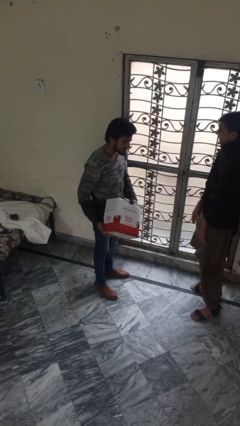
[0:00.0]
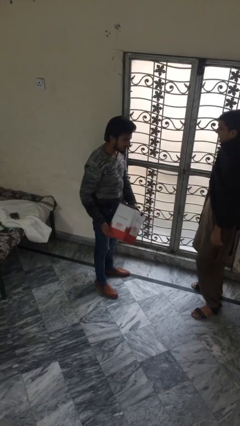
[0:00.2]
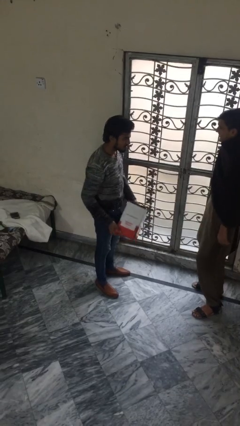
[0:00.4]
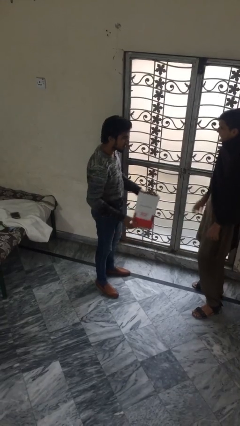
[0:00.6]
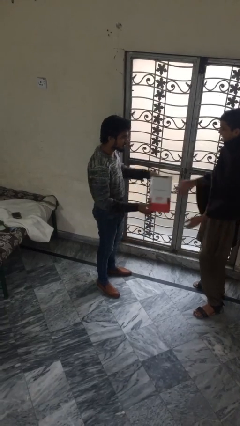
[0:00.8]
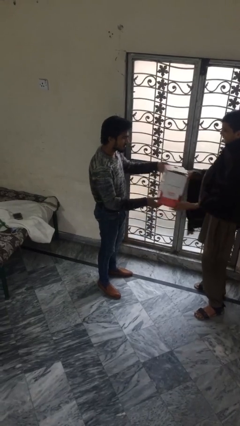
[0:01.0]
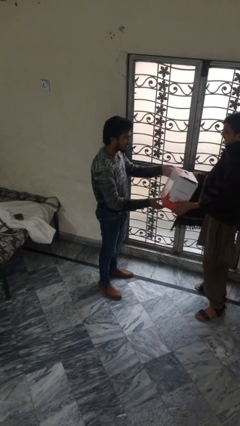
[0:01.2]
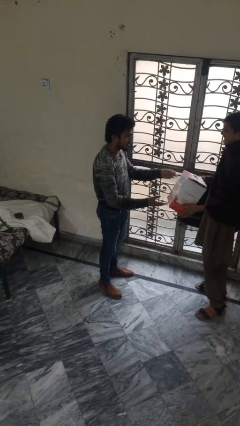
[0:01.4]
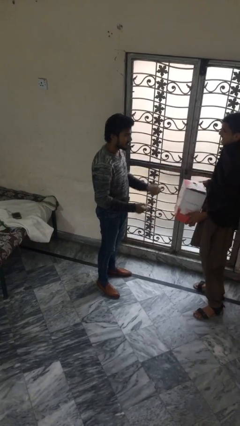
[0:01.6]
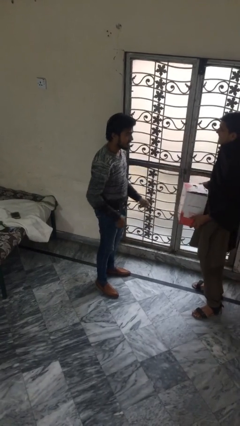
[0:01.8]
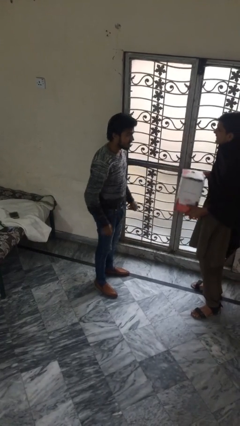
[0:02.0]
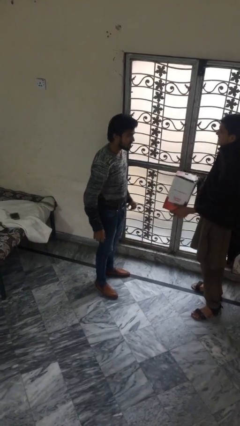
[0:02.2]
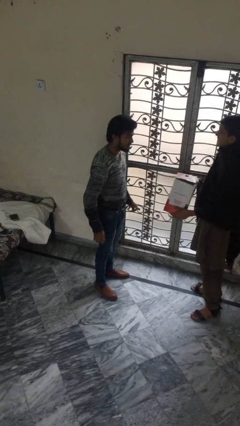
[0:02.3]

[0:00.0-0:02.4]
person transfers object to person

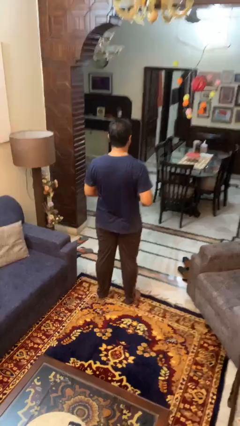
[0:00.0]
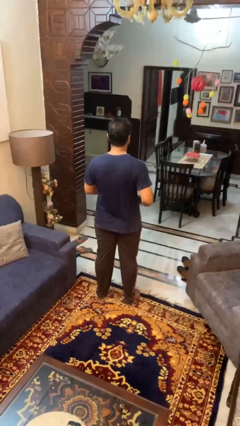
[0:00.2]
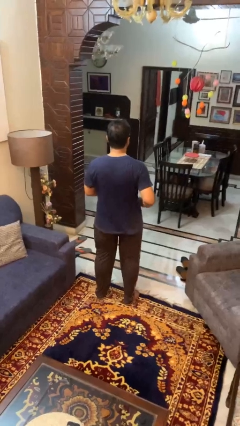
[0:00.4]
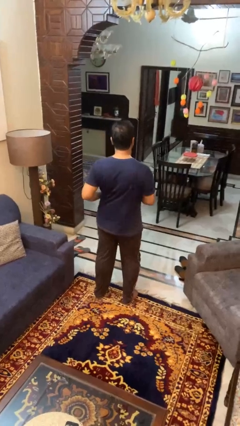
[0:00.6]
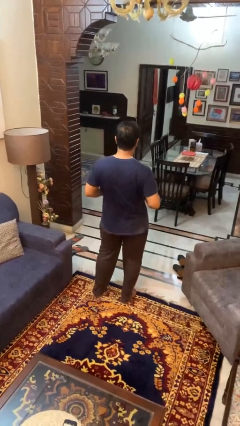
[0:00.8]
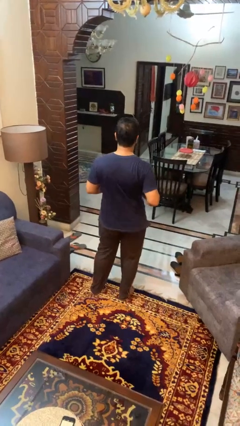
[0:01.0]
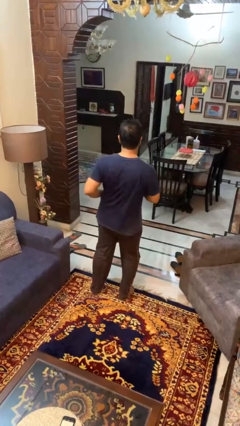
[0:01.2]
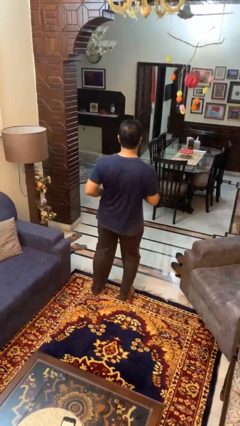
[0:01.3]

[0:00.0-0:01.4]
person wiggles hips

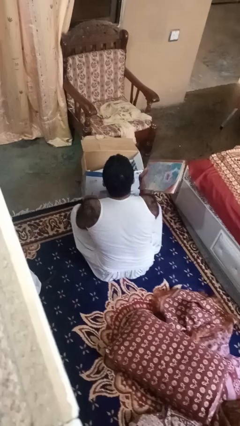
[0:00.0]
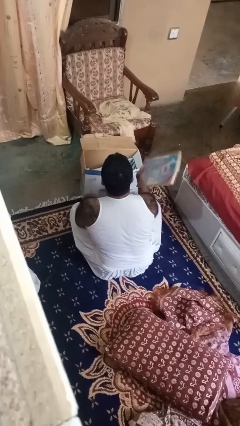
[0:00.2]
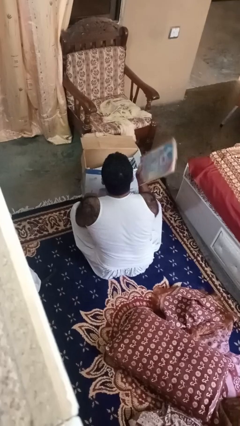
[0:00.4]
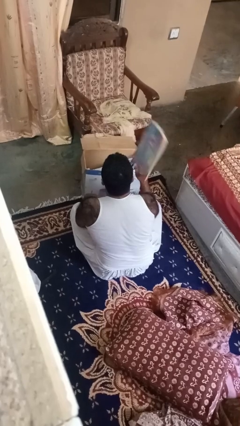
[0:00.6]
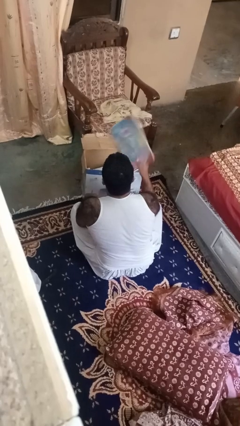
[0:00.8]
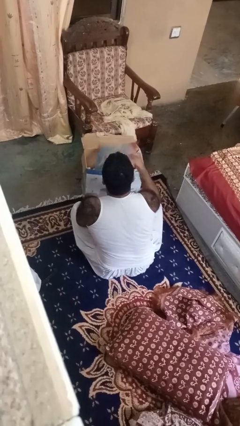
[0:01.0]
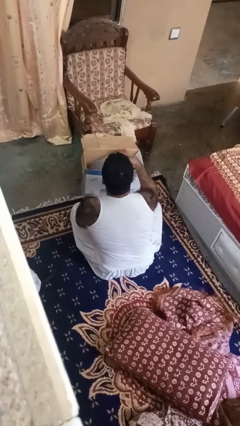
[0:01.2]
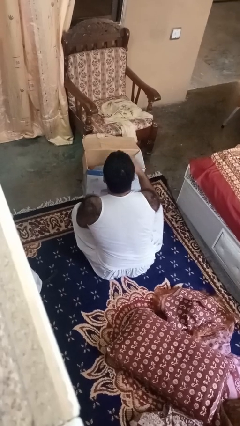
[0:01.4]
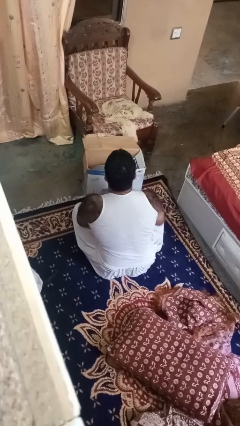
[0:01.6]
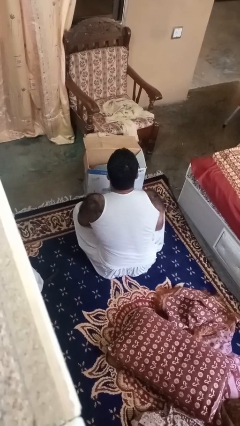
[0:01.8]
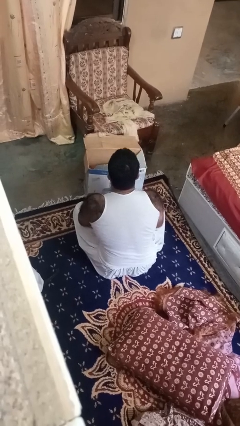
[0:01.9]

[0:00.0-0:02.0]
person puts object into box

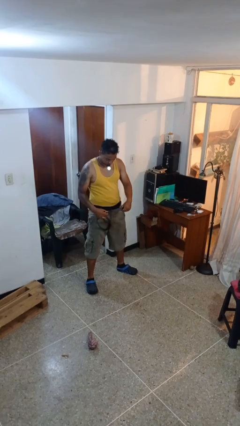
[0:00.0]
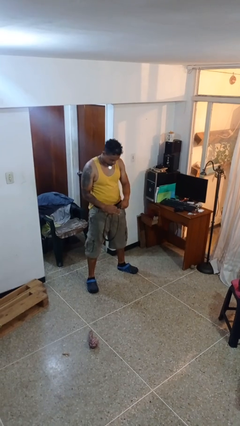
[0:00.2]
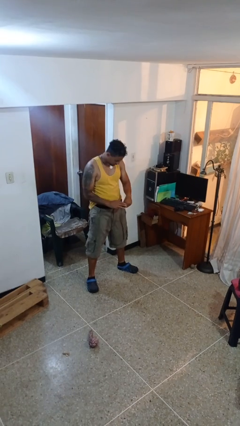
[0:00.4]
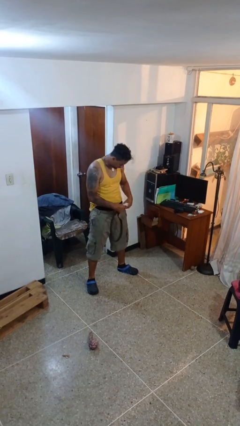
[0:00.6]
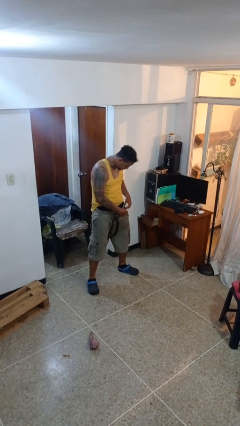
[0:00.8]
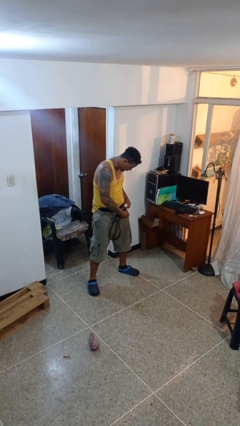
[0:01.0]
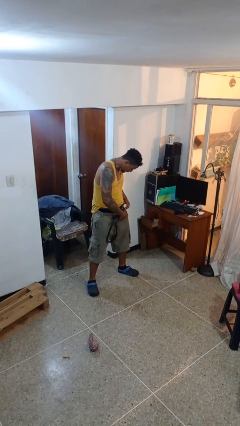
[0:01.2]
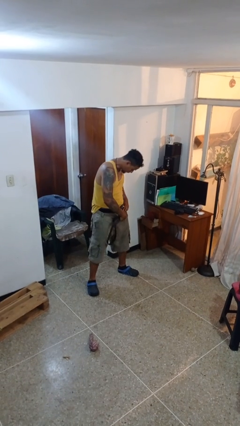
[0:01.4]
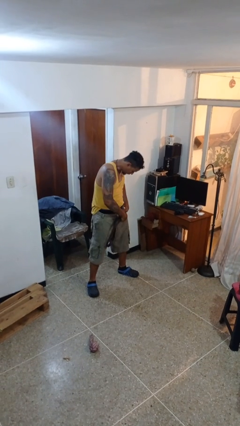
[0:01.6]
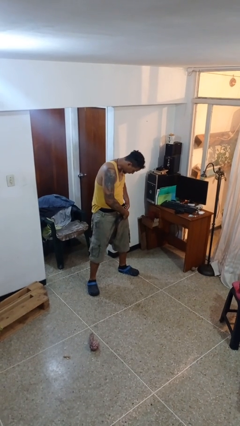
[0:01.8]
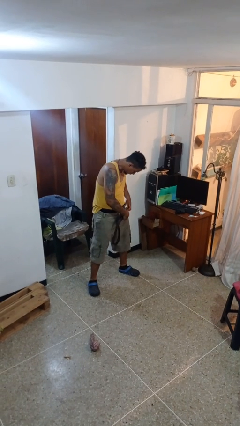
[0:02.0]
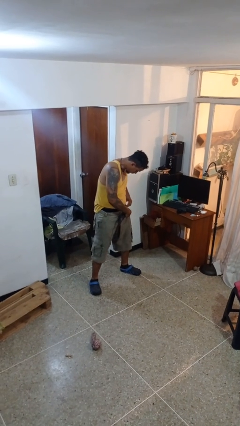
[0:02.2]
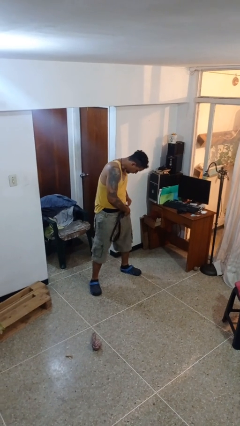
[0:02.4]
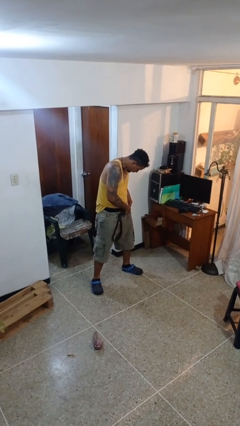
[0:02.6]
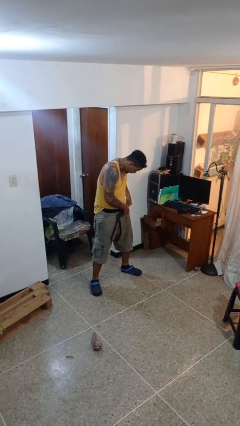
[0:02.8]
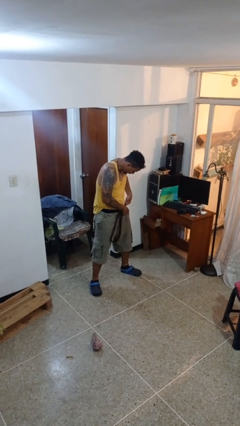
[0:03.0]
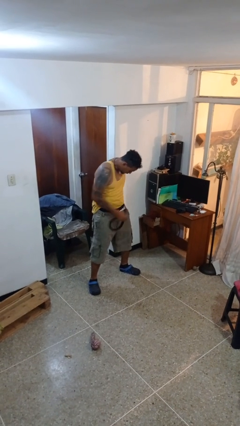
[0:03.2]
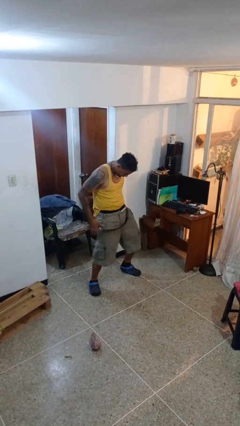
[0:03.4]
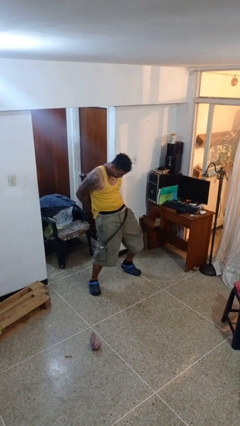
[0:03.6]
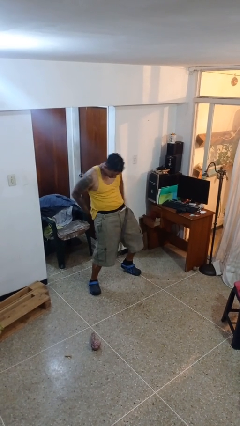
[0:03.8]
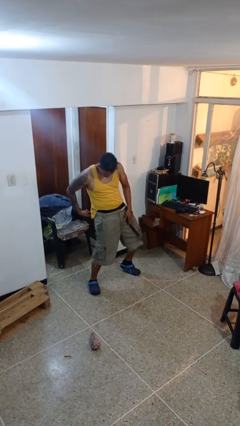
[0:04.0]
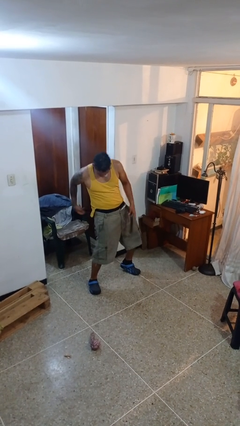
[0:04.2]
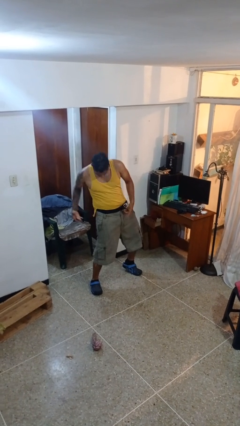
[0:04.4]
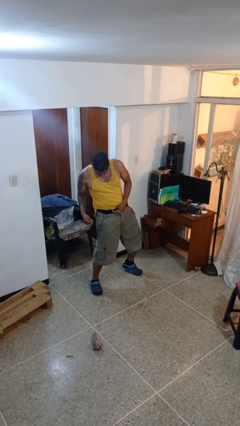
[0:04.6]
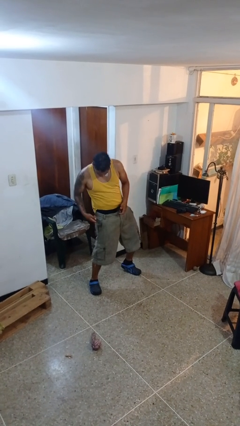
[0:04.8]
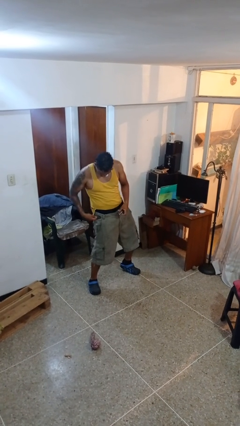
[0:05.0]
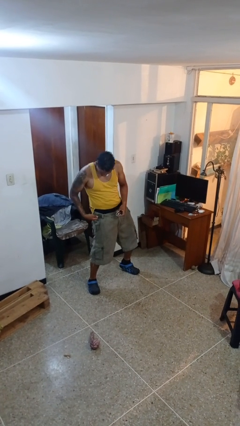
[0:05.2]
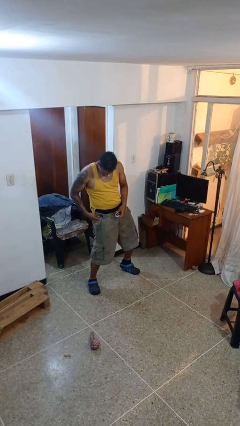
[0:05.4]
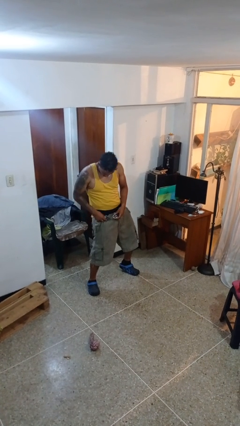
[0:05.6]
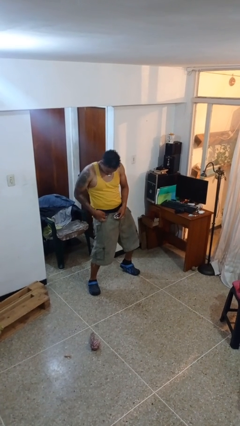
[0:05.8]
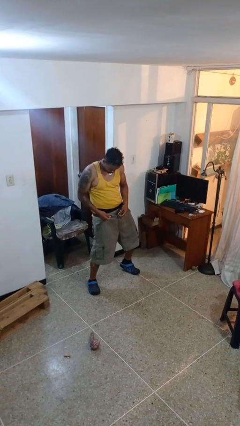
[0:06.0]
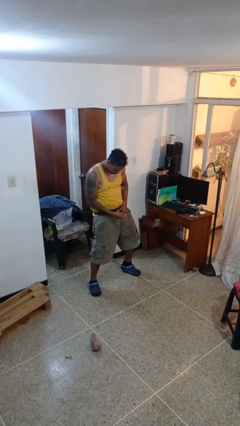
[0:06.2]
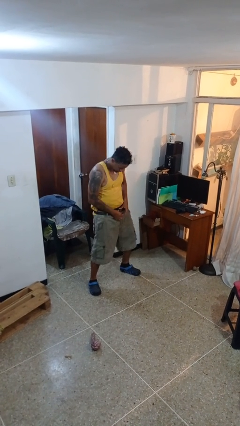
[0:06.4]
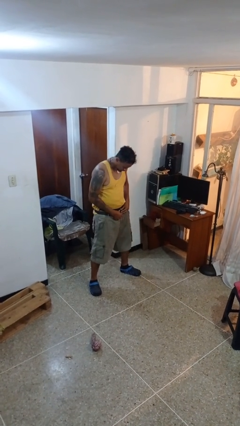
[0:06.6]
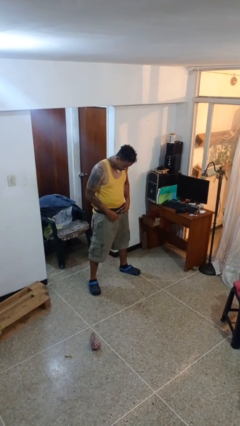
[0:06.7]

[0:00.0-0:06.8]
person puts on belt

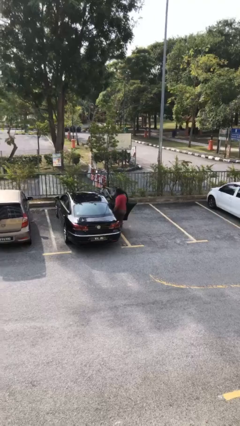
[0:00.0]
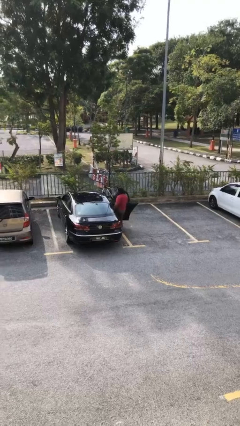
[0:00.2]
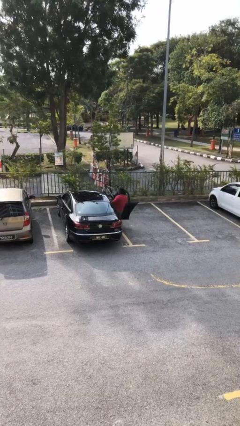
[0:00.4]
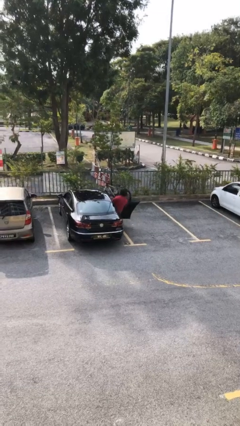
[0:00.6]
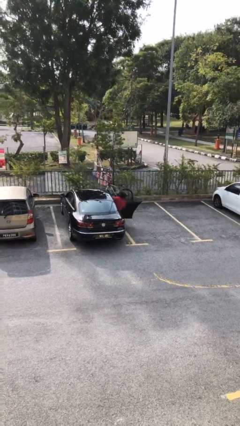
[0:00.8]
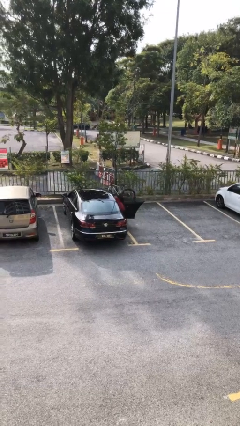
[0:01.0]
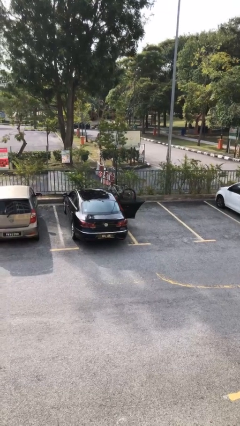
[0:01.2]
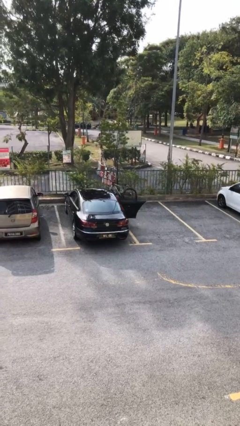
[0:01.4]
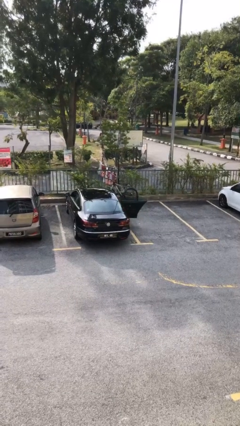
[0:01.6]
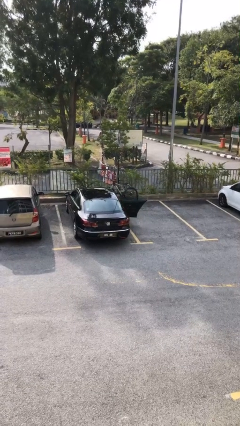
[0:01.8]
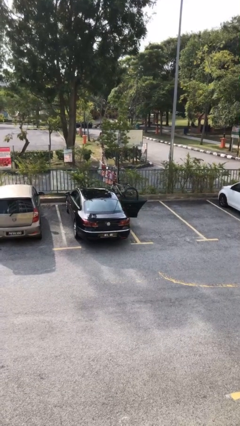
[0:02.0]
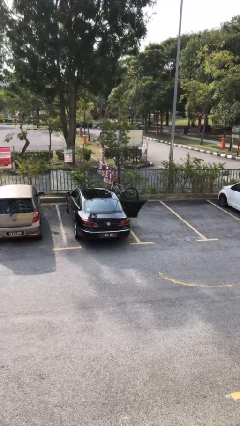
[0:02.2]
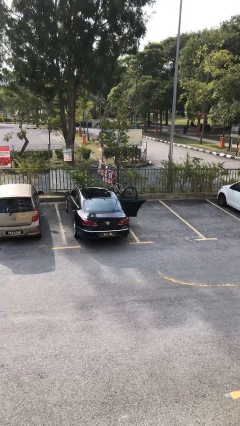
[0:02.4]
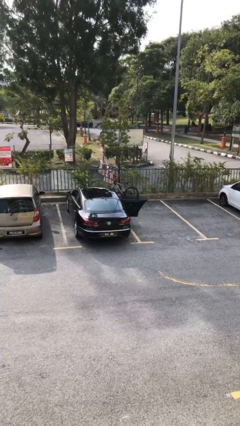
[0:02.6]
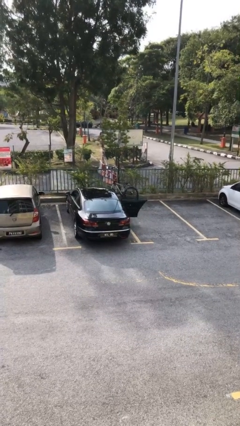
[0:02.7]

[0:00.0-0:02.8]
person enters car

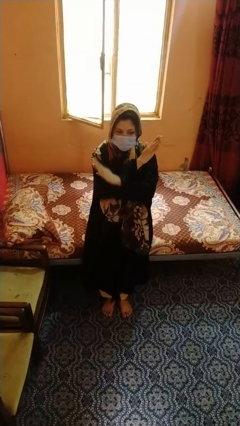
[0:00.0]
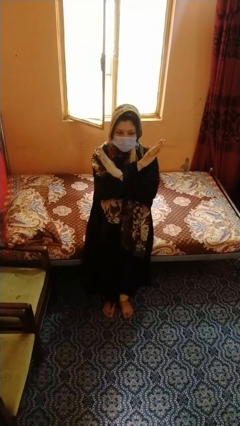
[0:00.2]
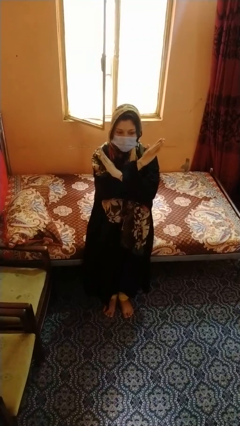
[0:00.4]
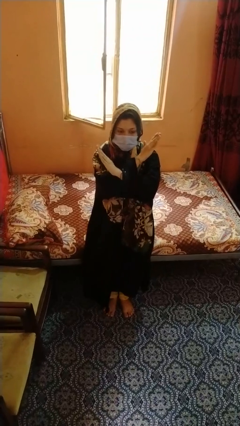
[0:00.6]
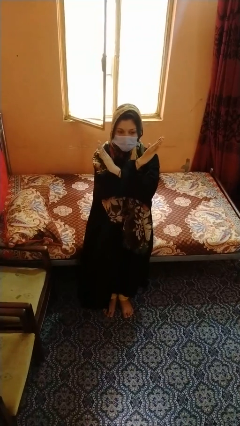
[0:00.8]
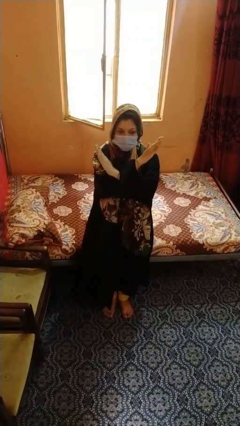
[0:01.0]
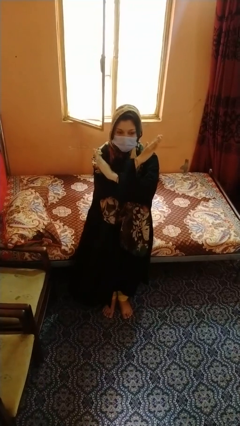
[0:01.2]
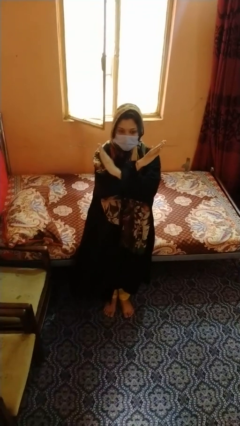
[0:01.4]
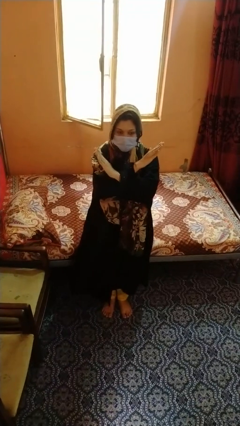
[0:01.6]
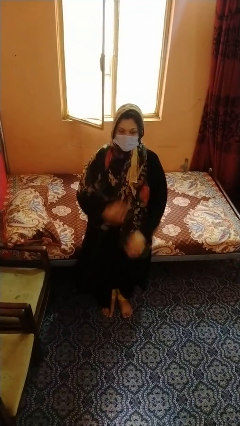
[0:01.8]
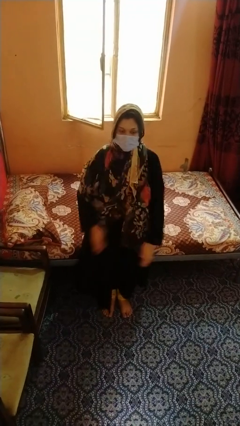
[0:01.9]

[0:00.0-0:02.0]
person gestures arms x

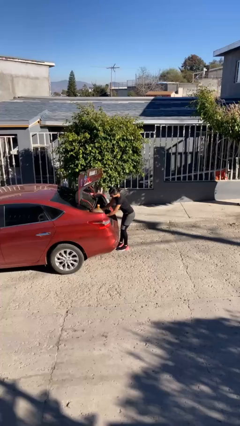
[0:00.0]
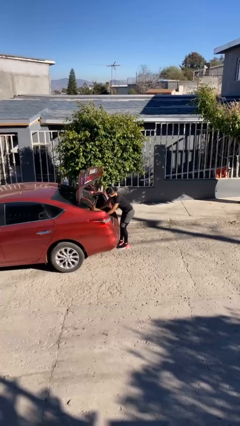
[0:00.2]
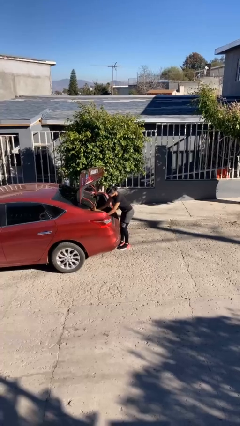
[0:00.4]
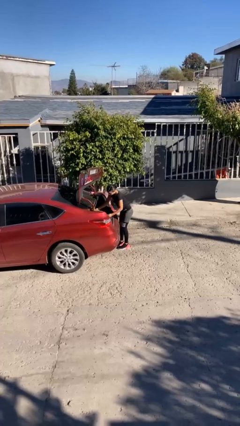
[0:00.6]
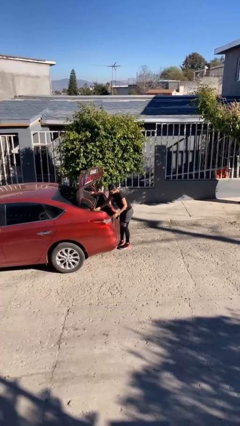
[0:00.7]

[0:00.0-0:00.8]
person loads car
